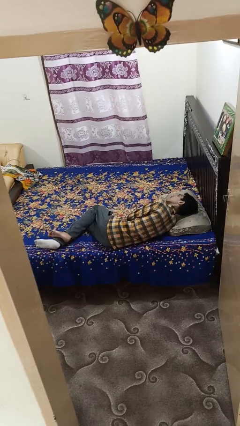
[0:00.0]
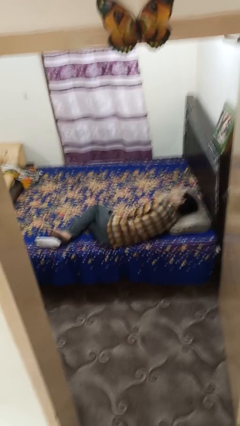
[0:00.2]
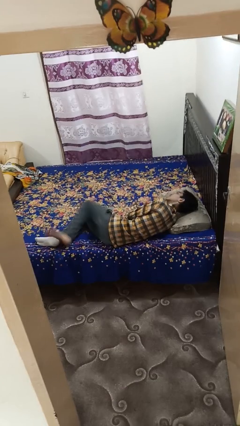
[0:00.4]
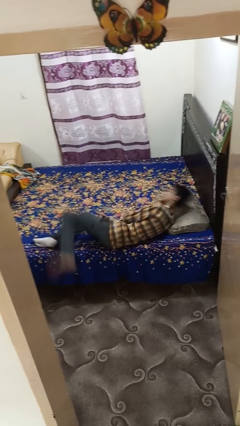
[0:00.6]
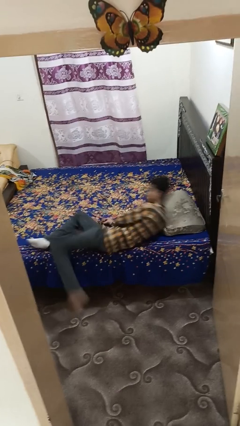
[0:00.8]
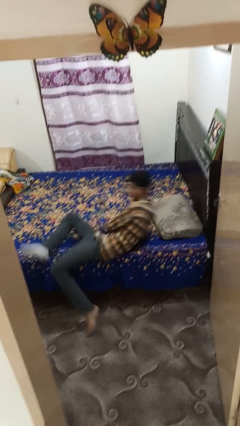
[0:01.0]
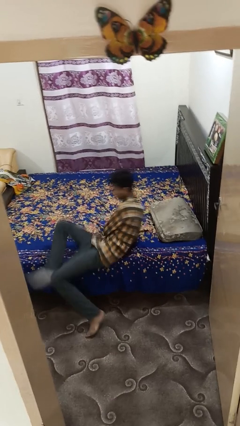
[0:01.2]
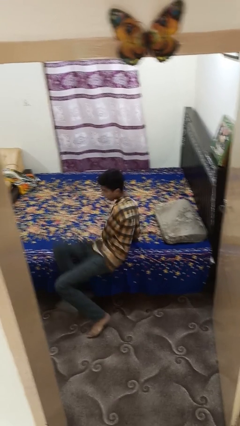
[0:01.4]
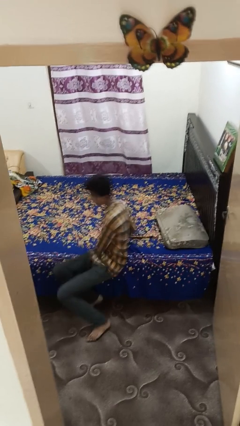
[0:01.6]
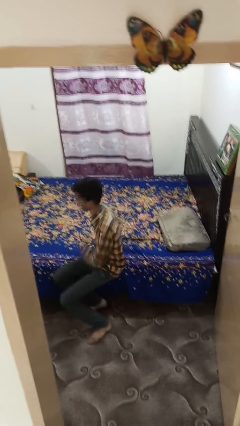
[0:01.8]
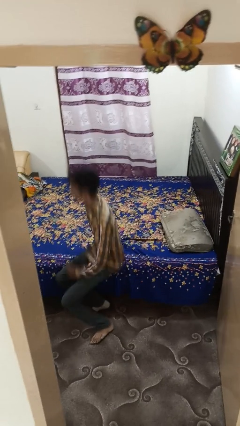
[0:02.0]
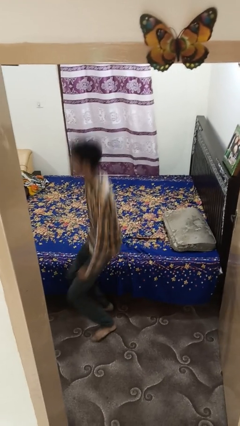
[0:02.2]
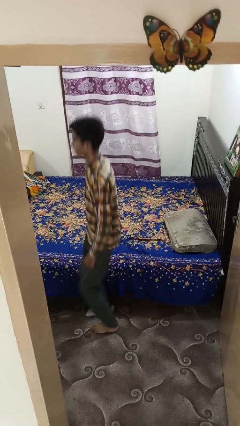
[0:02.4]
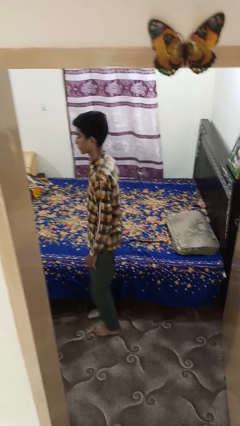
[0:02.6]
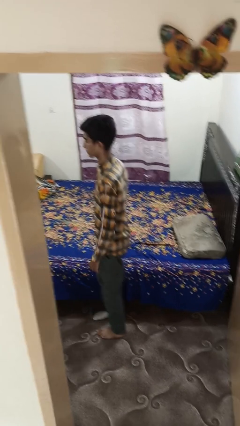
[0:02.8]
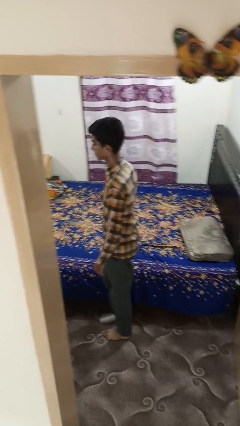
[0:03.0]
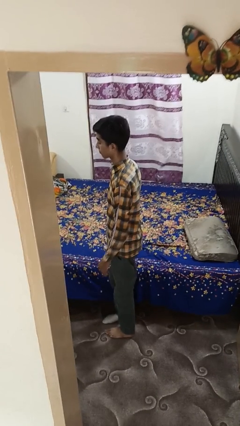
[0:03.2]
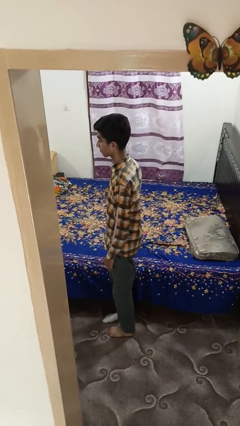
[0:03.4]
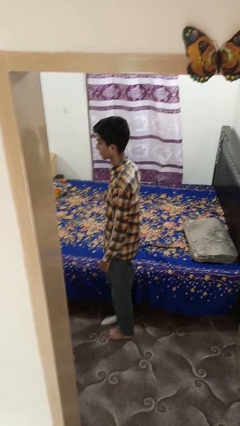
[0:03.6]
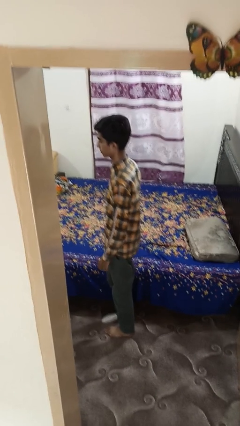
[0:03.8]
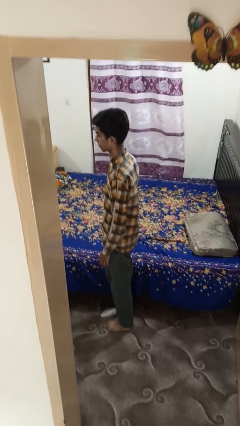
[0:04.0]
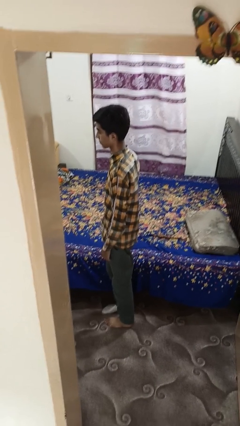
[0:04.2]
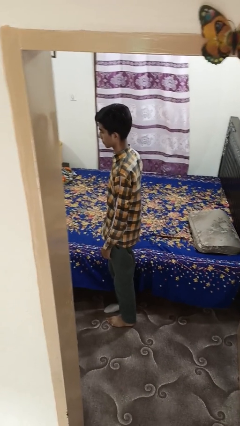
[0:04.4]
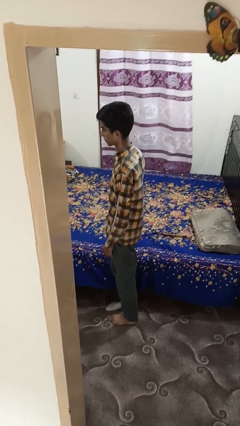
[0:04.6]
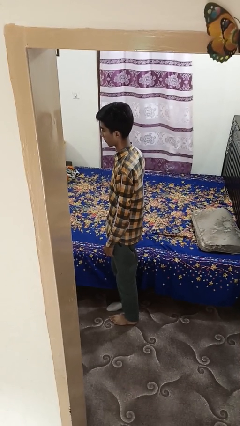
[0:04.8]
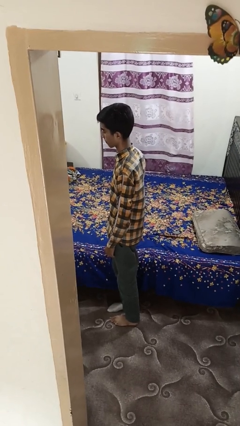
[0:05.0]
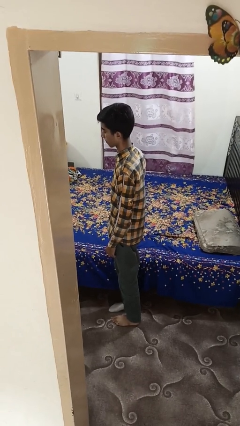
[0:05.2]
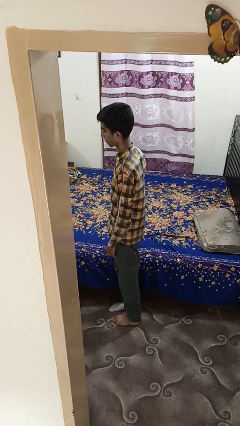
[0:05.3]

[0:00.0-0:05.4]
person stands up

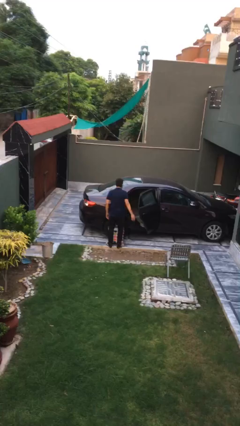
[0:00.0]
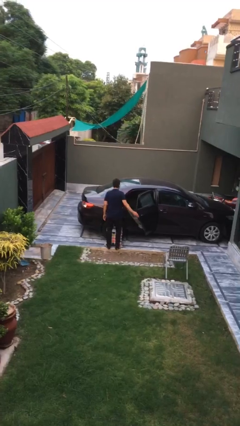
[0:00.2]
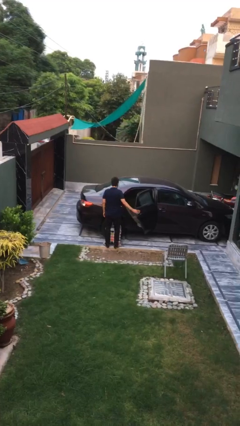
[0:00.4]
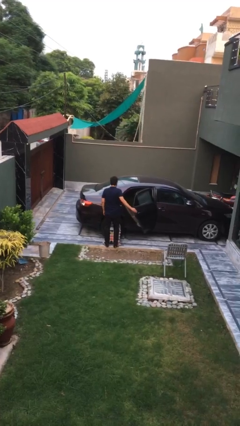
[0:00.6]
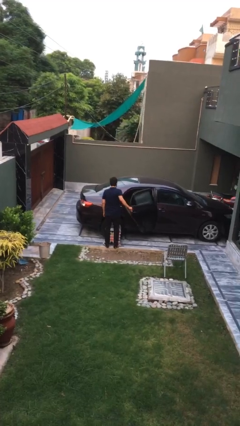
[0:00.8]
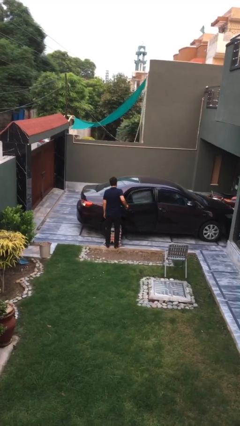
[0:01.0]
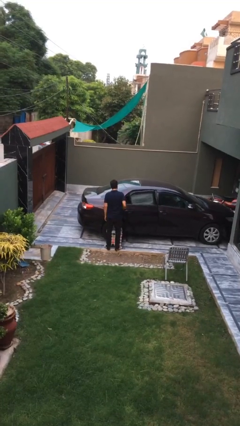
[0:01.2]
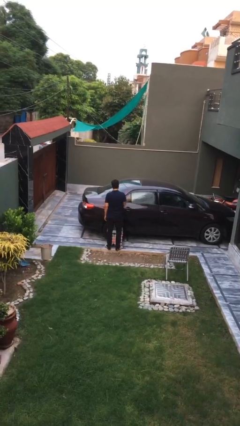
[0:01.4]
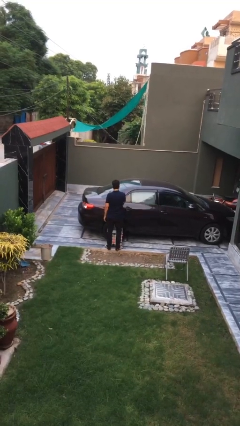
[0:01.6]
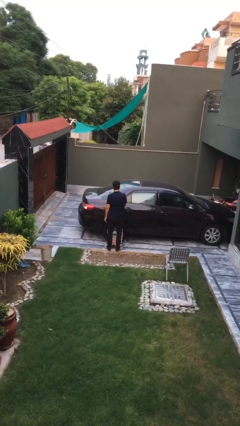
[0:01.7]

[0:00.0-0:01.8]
person closes car door

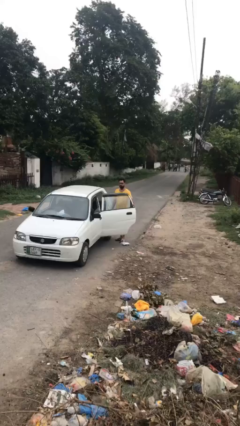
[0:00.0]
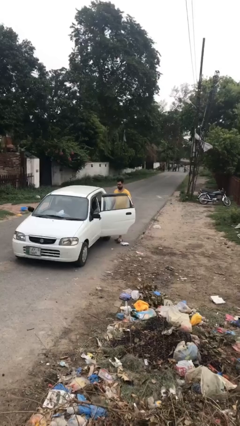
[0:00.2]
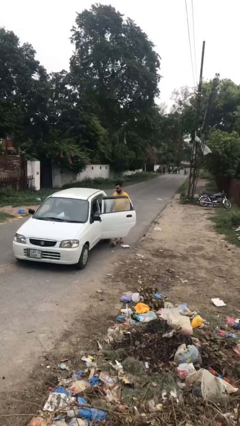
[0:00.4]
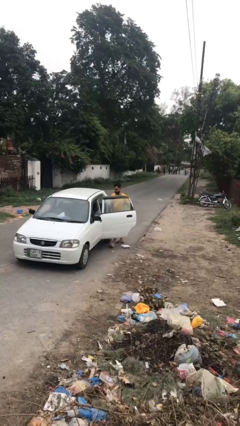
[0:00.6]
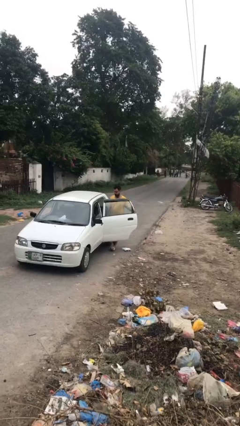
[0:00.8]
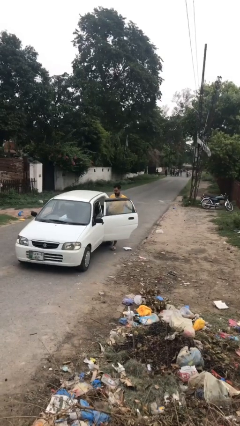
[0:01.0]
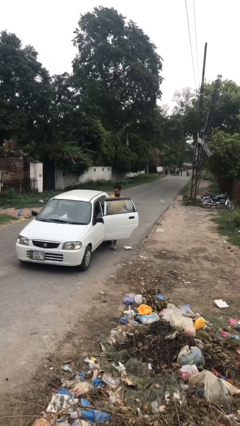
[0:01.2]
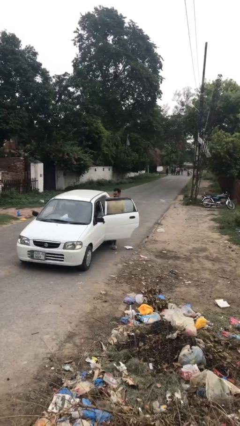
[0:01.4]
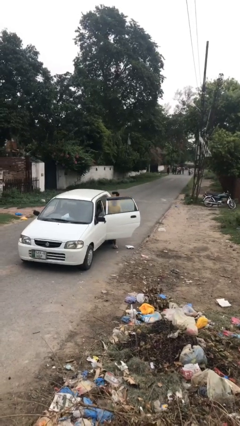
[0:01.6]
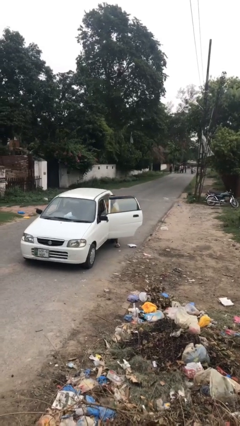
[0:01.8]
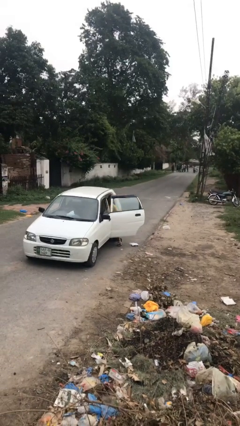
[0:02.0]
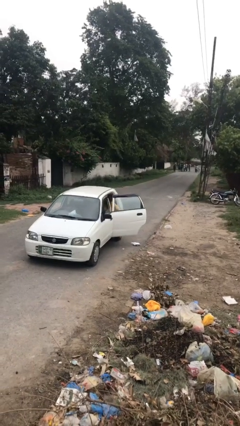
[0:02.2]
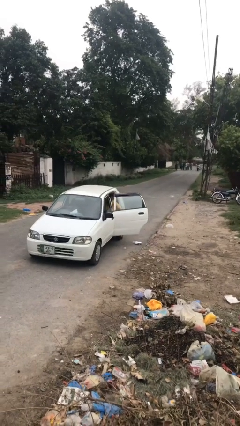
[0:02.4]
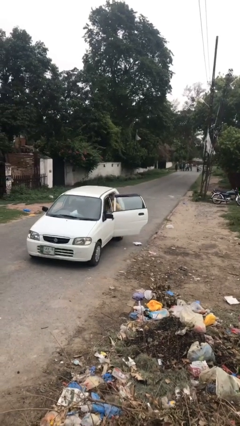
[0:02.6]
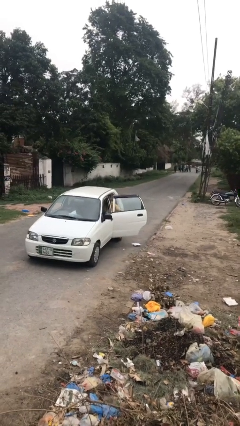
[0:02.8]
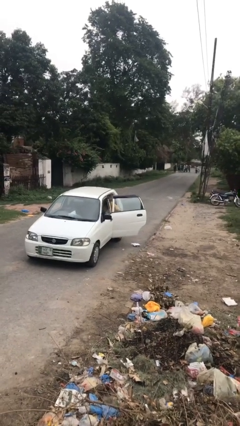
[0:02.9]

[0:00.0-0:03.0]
person enters car

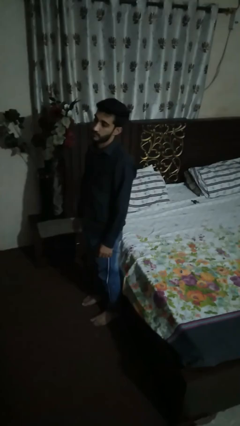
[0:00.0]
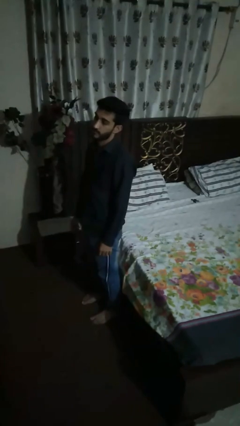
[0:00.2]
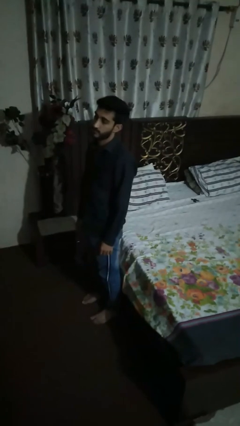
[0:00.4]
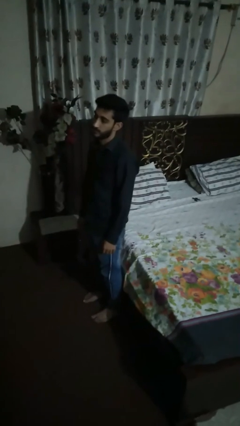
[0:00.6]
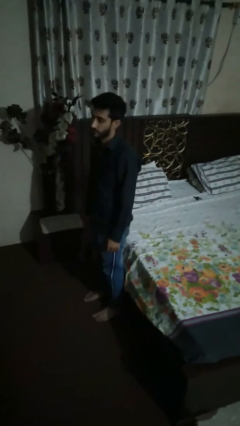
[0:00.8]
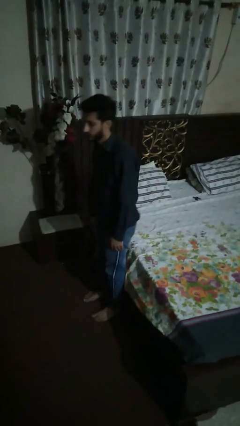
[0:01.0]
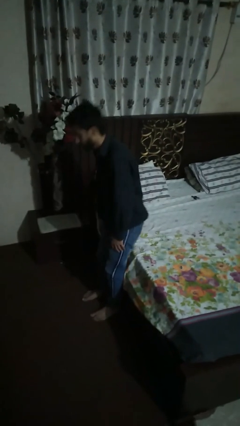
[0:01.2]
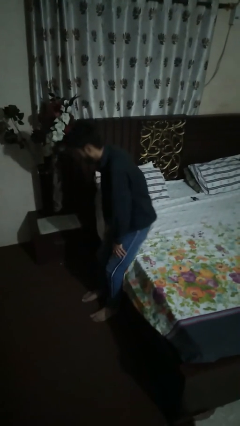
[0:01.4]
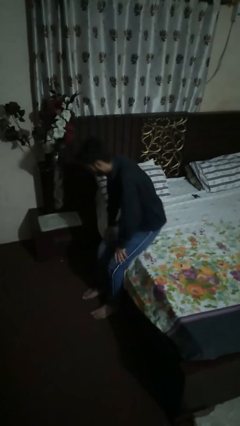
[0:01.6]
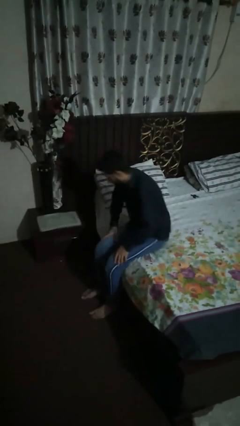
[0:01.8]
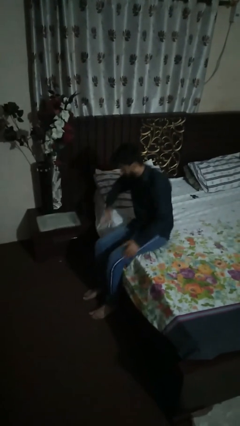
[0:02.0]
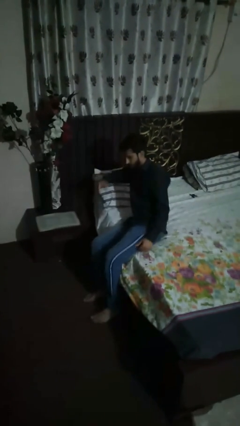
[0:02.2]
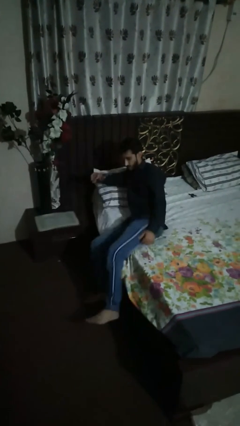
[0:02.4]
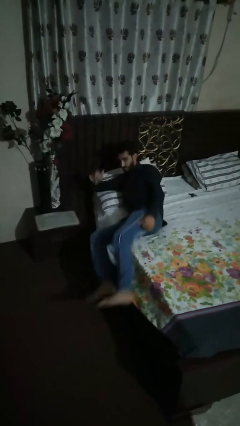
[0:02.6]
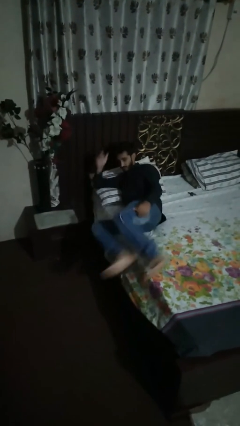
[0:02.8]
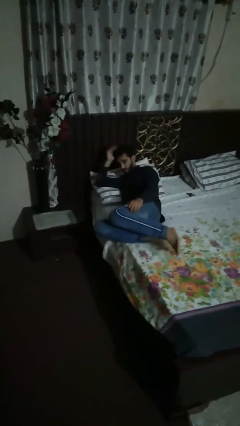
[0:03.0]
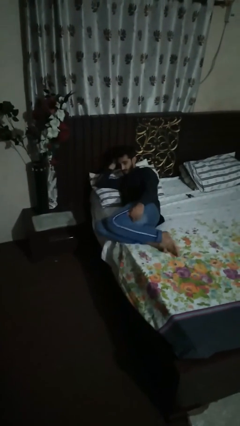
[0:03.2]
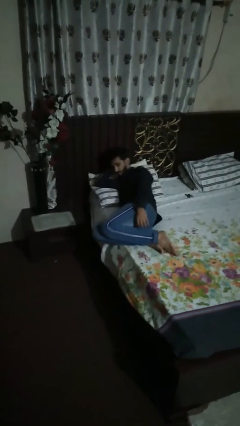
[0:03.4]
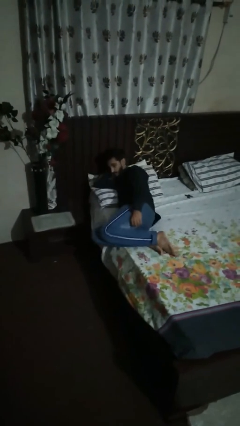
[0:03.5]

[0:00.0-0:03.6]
person lies down on bed

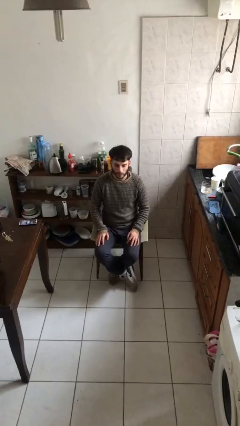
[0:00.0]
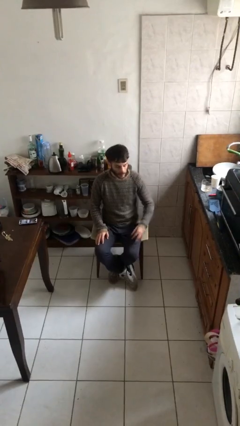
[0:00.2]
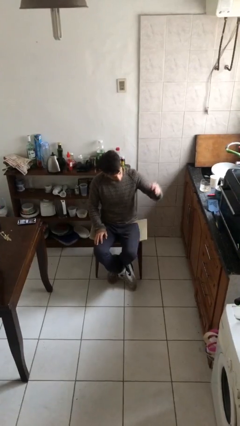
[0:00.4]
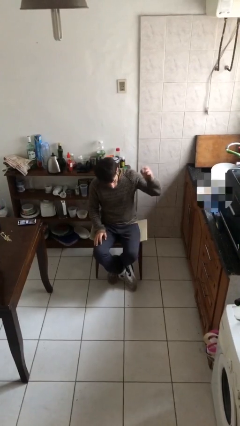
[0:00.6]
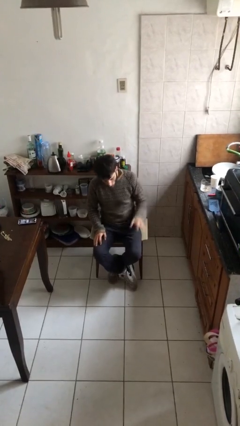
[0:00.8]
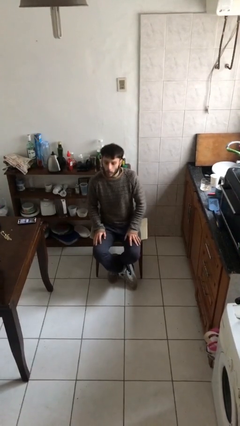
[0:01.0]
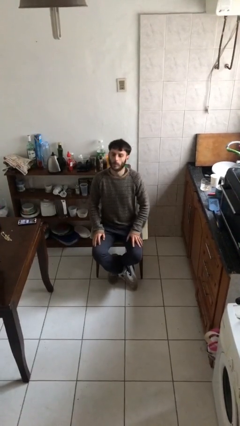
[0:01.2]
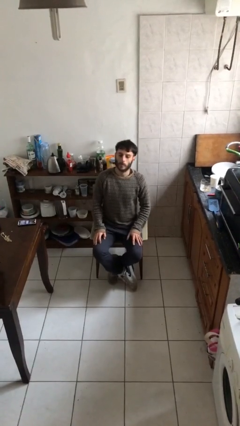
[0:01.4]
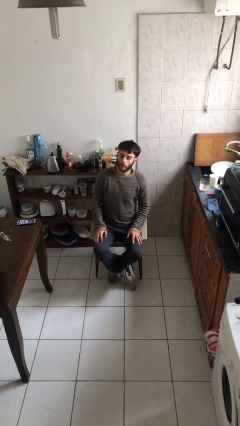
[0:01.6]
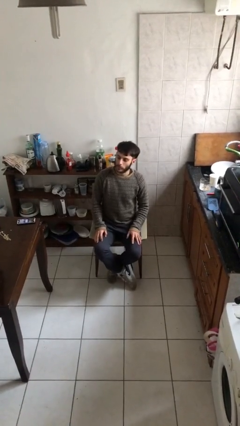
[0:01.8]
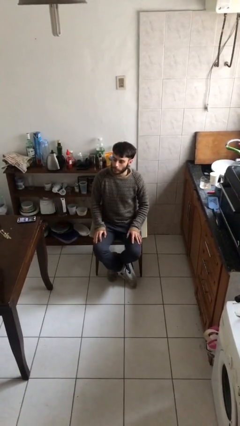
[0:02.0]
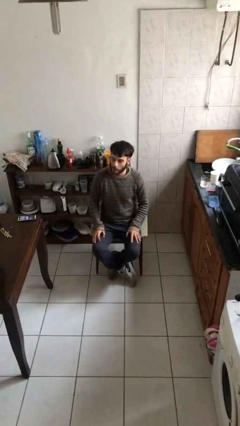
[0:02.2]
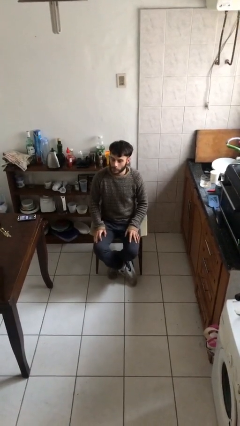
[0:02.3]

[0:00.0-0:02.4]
person slaps hands on thighs

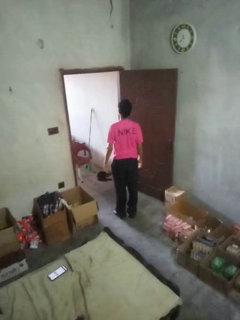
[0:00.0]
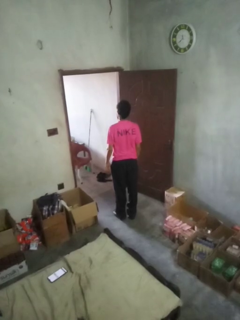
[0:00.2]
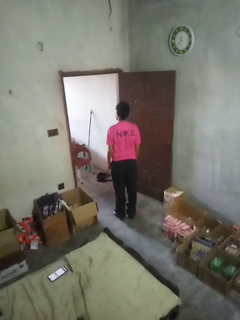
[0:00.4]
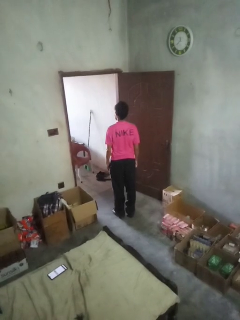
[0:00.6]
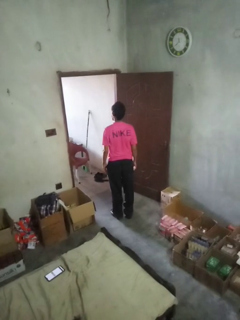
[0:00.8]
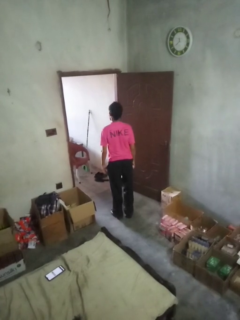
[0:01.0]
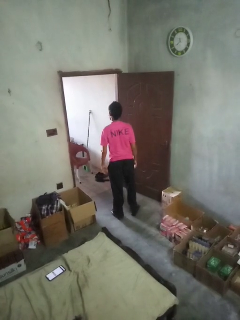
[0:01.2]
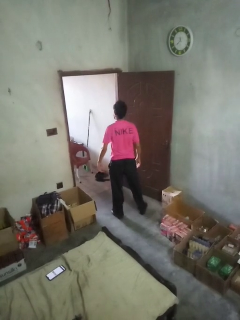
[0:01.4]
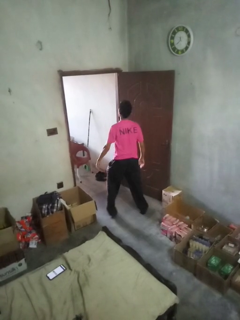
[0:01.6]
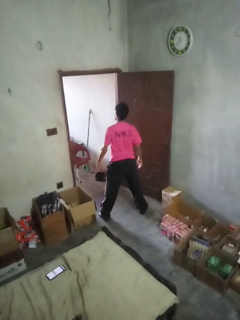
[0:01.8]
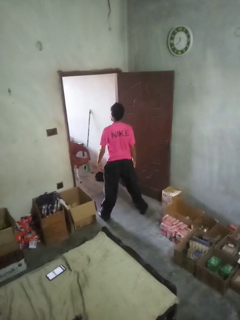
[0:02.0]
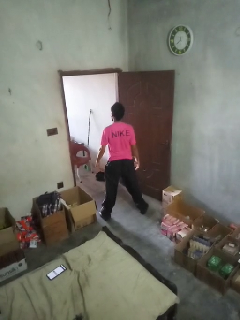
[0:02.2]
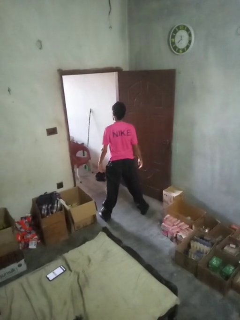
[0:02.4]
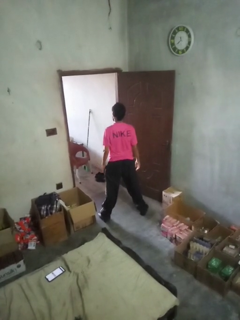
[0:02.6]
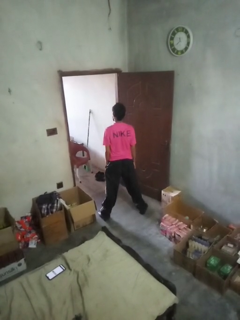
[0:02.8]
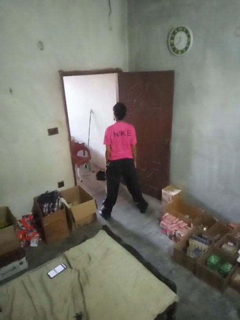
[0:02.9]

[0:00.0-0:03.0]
person stretches back